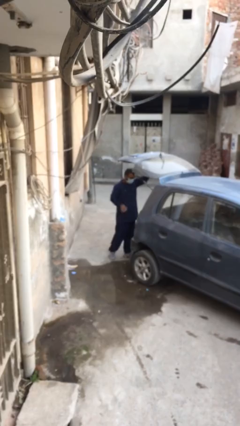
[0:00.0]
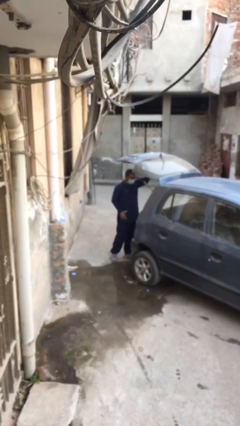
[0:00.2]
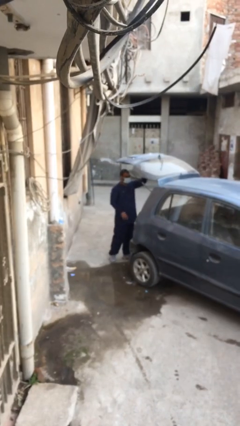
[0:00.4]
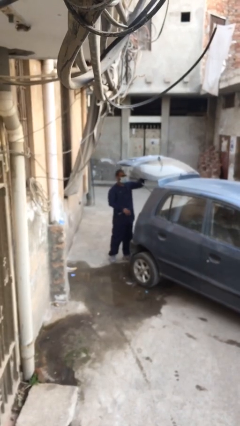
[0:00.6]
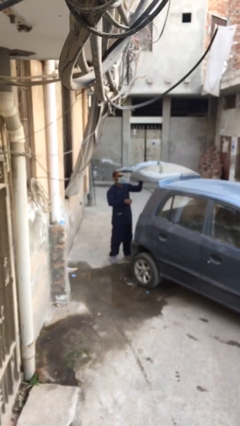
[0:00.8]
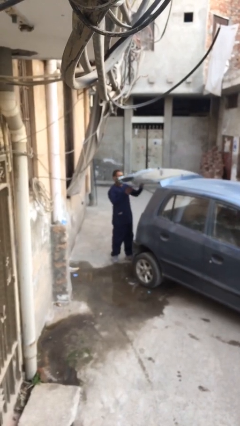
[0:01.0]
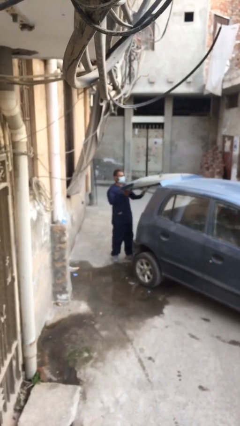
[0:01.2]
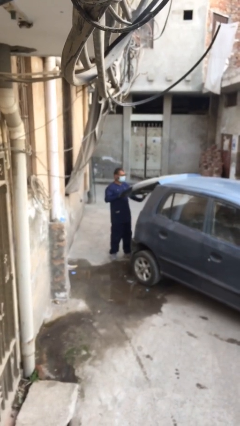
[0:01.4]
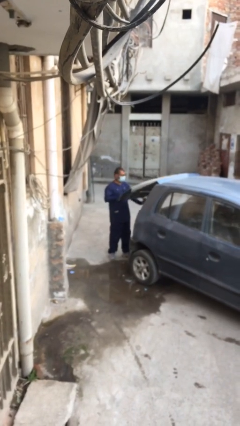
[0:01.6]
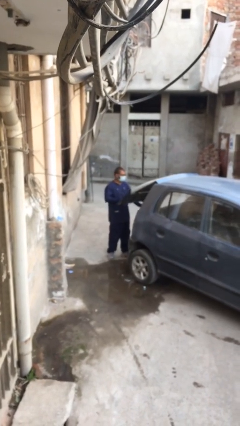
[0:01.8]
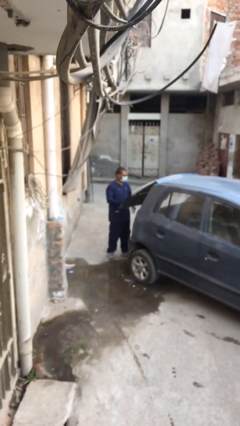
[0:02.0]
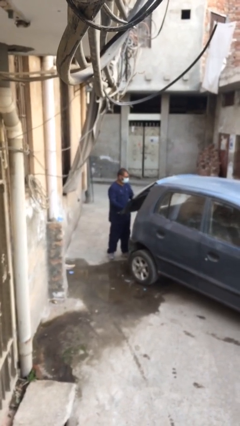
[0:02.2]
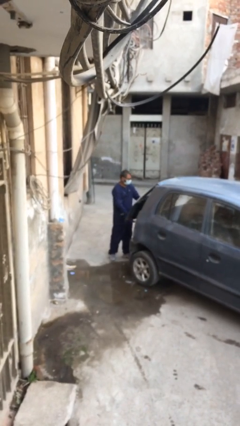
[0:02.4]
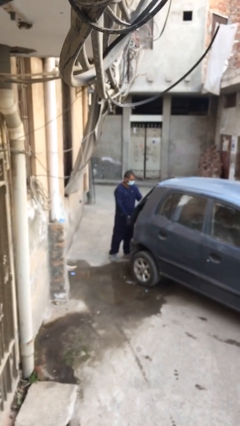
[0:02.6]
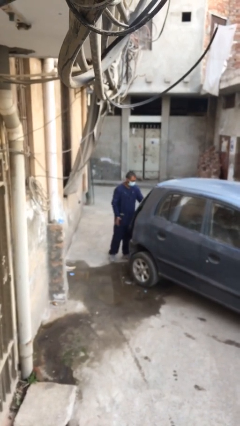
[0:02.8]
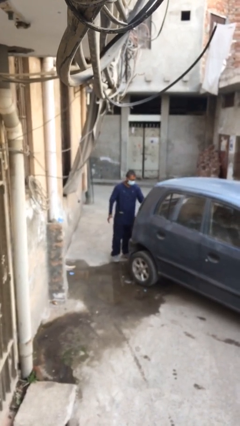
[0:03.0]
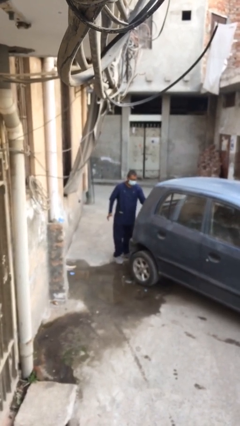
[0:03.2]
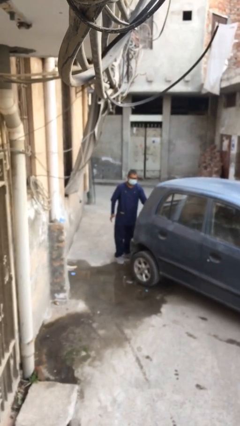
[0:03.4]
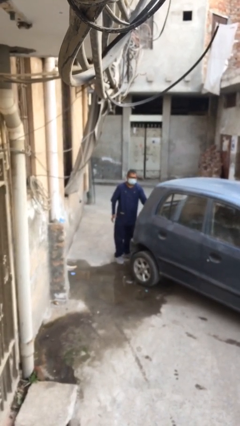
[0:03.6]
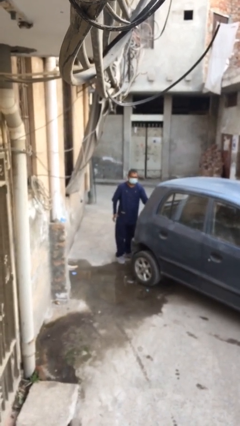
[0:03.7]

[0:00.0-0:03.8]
person closes car trunk

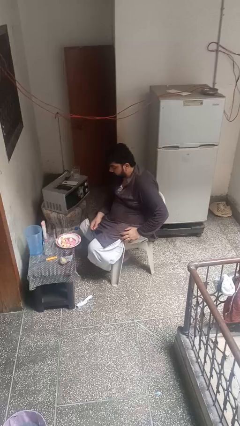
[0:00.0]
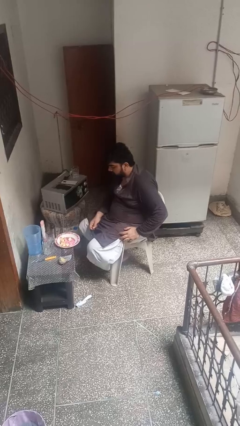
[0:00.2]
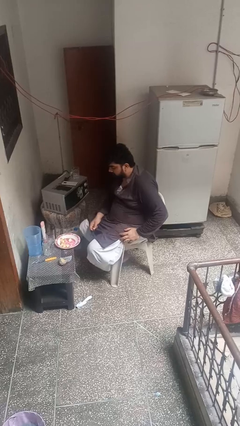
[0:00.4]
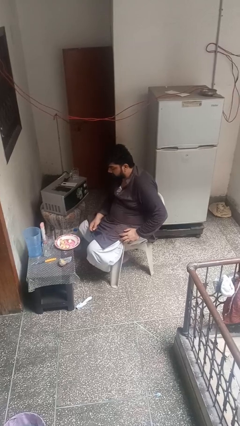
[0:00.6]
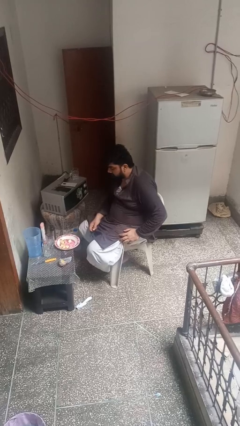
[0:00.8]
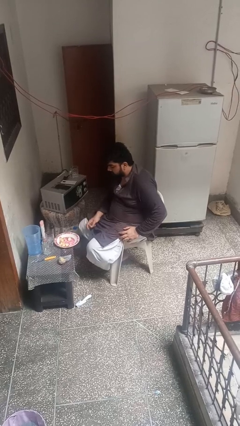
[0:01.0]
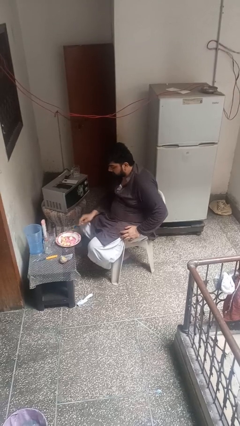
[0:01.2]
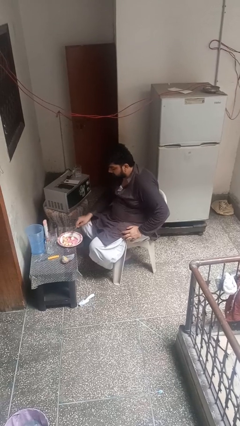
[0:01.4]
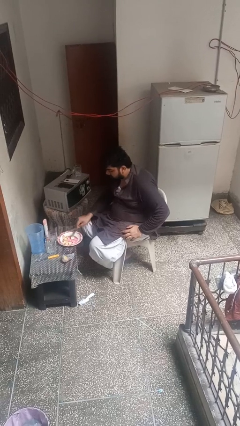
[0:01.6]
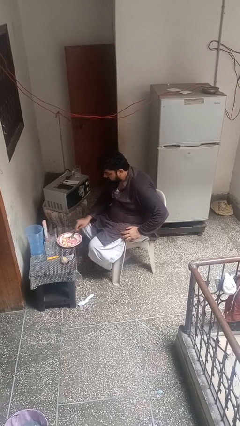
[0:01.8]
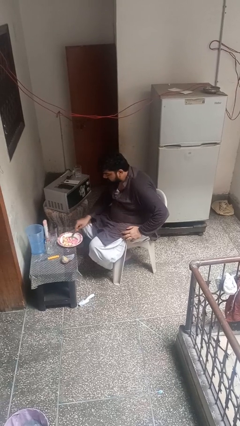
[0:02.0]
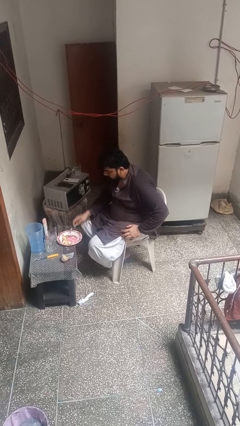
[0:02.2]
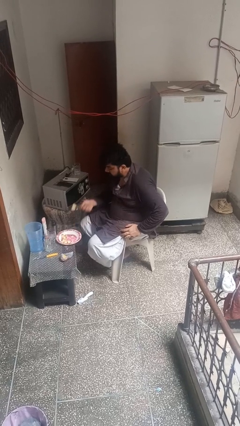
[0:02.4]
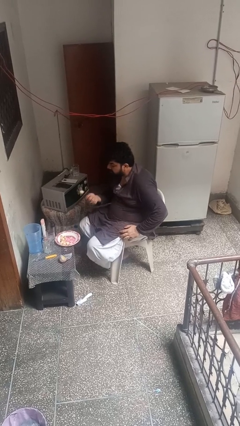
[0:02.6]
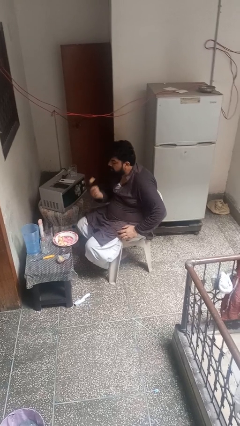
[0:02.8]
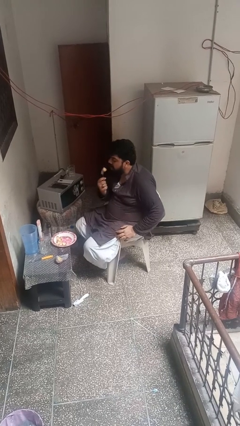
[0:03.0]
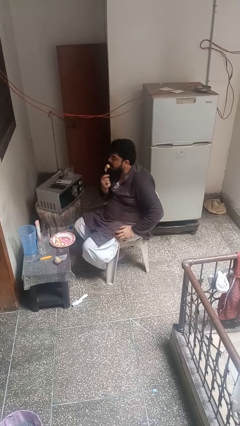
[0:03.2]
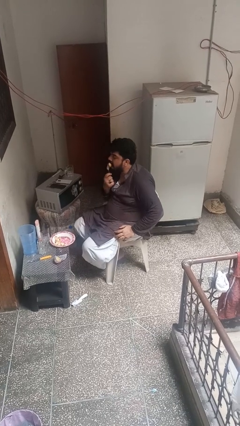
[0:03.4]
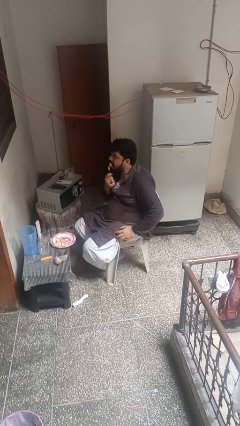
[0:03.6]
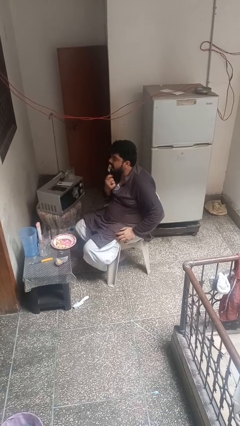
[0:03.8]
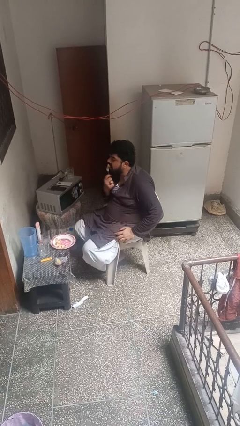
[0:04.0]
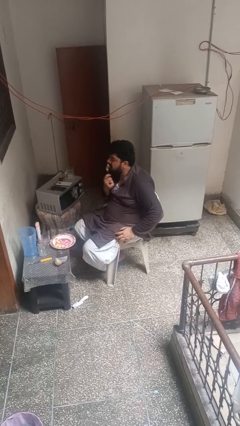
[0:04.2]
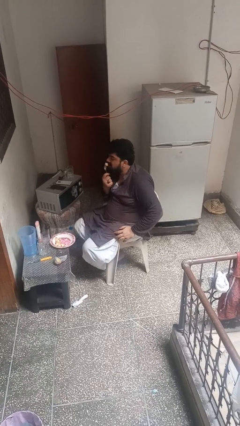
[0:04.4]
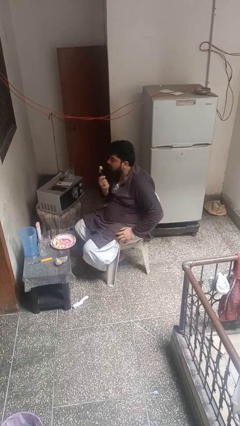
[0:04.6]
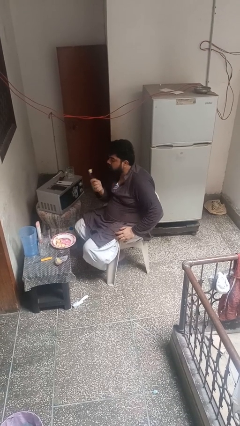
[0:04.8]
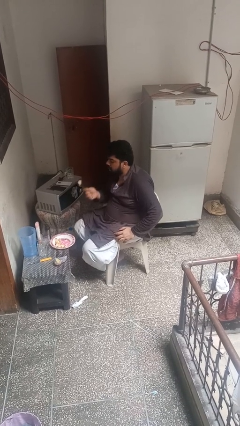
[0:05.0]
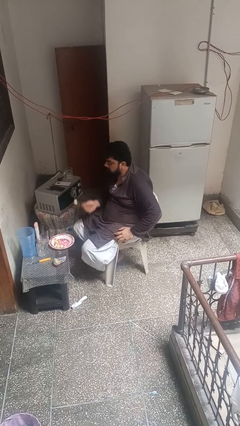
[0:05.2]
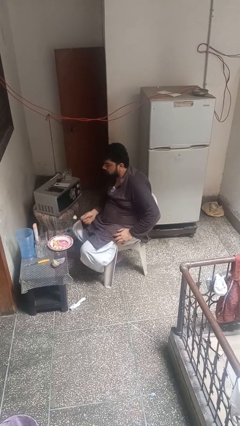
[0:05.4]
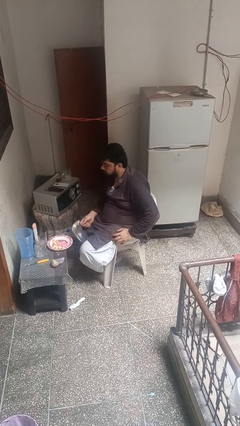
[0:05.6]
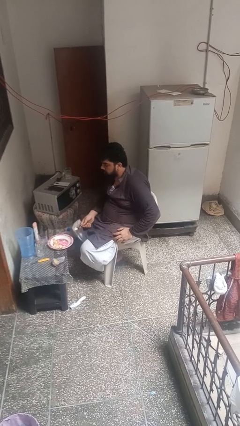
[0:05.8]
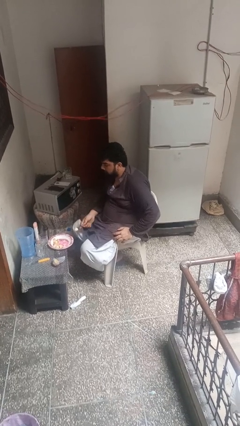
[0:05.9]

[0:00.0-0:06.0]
person eats with utensil

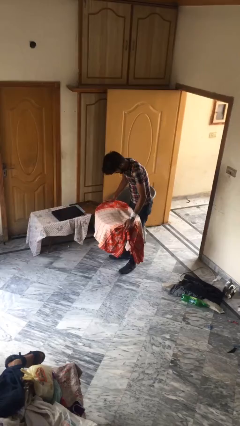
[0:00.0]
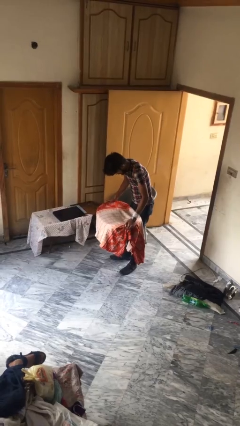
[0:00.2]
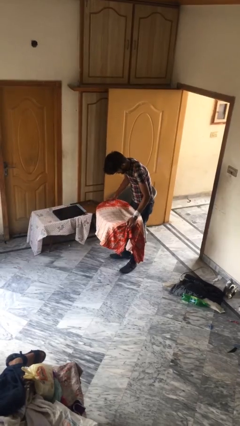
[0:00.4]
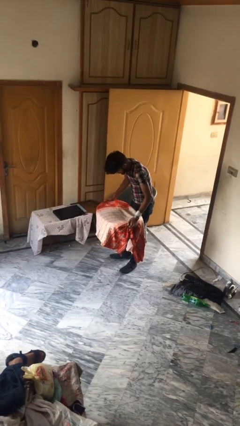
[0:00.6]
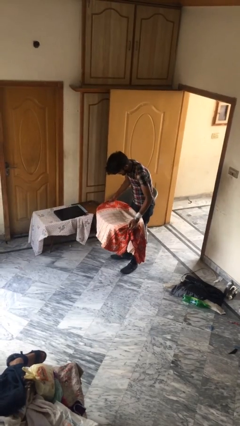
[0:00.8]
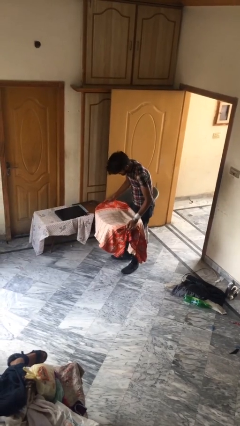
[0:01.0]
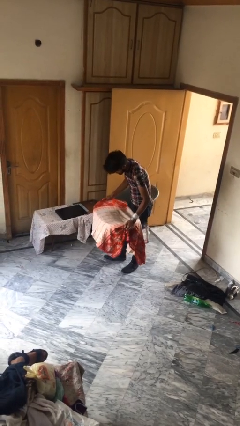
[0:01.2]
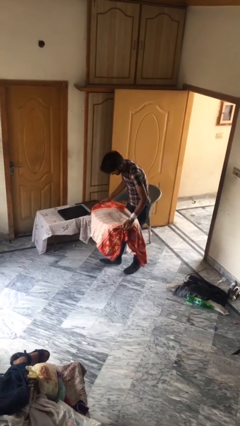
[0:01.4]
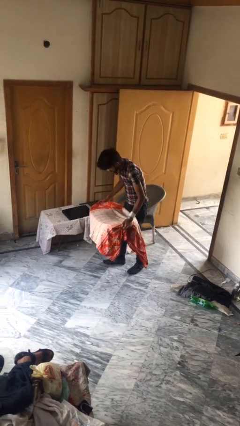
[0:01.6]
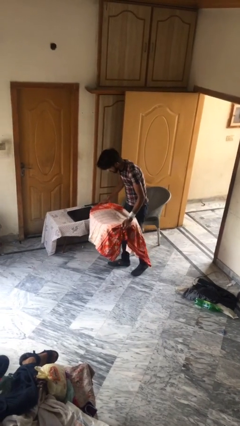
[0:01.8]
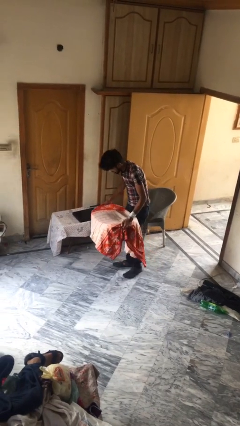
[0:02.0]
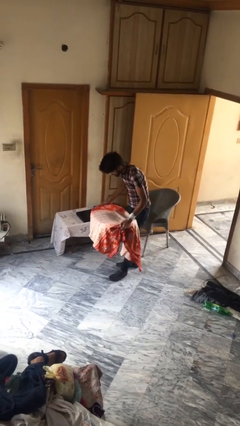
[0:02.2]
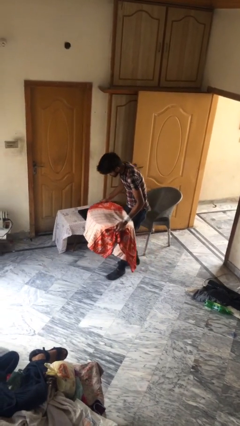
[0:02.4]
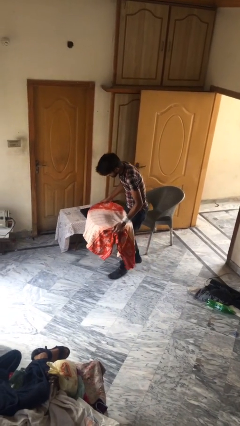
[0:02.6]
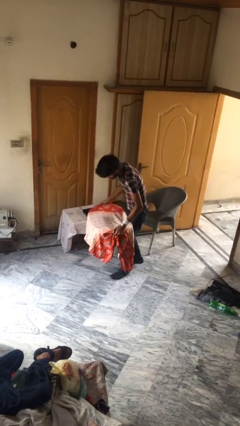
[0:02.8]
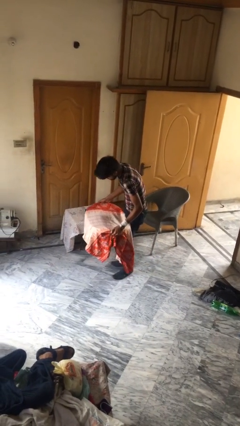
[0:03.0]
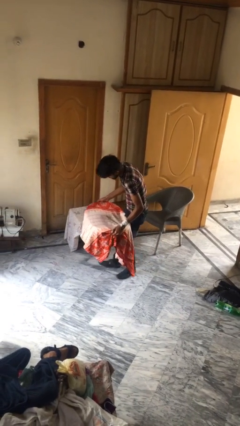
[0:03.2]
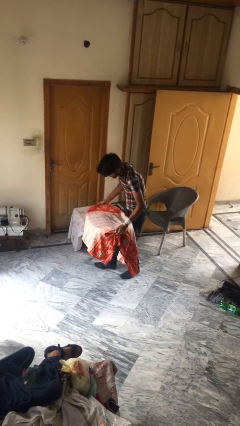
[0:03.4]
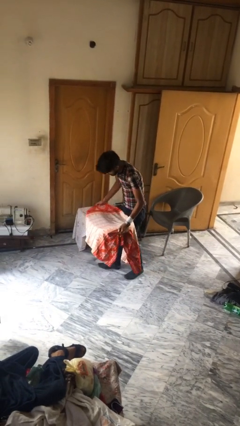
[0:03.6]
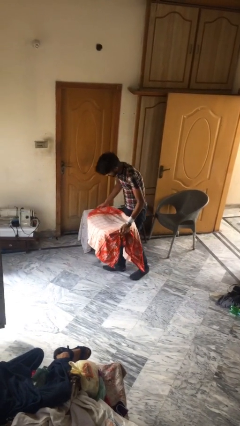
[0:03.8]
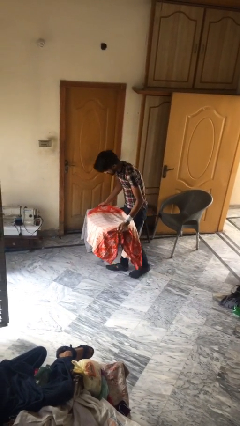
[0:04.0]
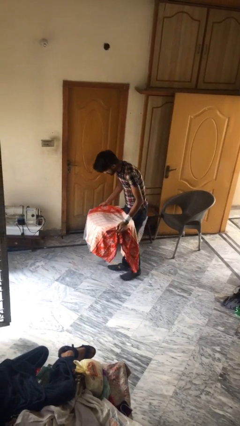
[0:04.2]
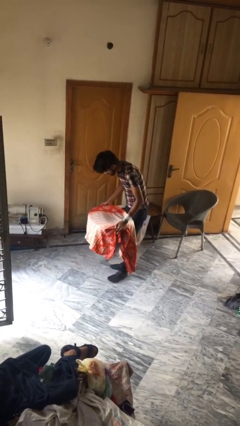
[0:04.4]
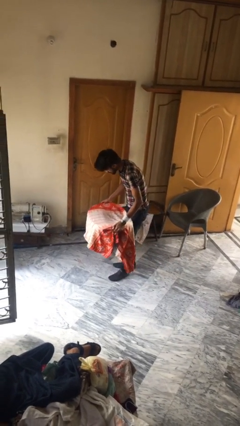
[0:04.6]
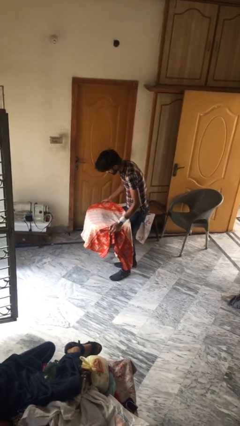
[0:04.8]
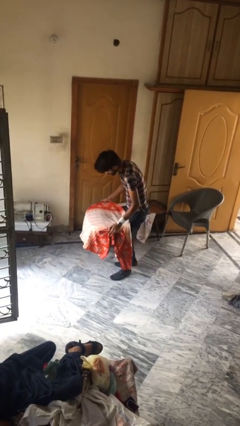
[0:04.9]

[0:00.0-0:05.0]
person carries heavy object

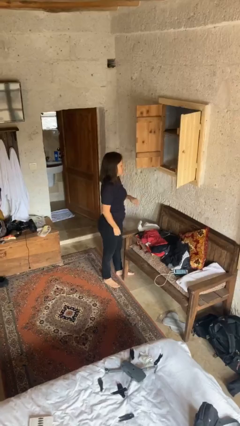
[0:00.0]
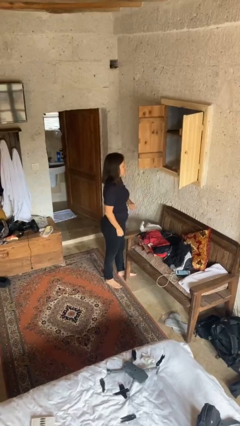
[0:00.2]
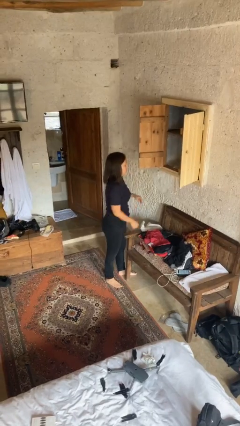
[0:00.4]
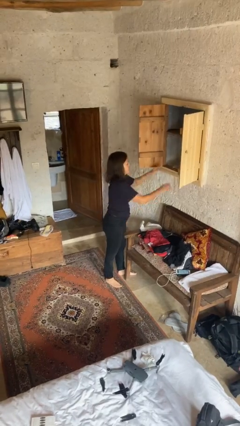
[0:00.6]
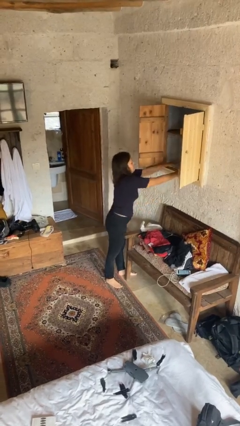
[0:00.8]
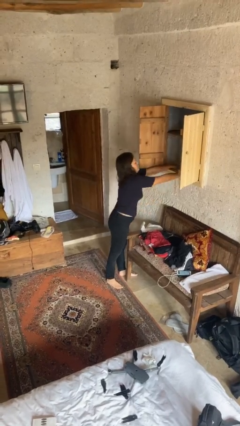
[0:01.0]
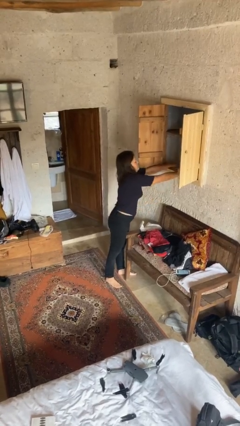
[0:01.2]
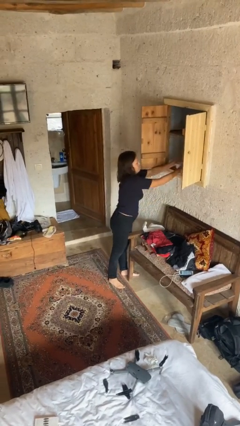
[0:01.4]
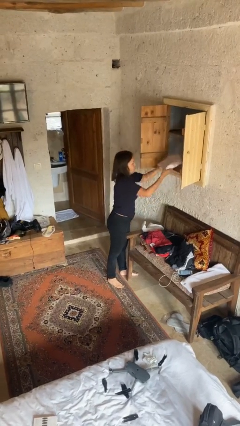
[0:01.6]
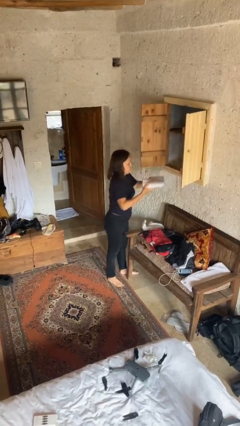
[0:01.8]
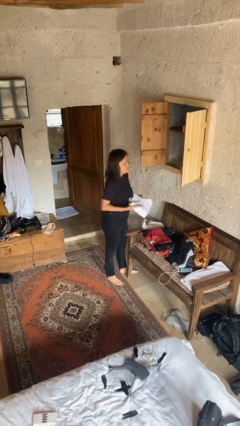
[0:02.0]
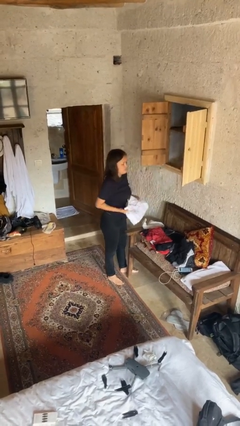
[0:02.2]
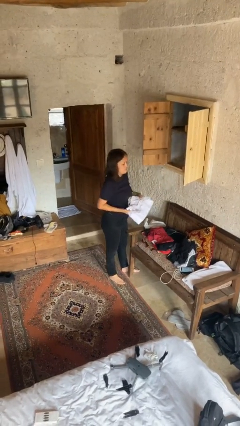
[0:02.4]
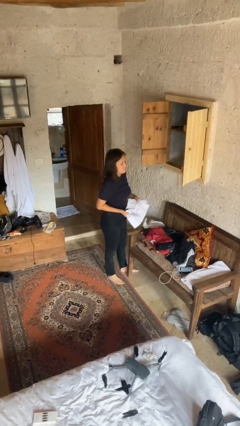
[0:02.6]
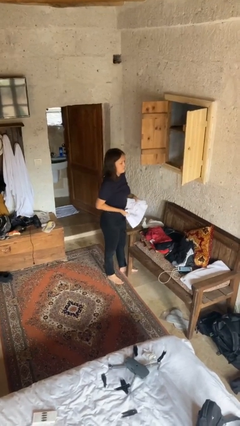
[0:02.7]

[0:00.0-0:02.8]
person takes clothes from dresser
